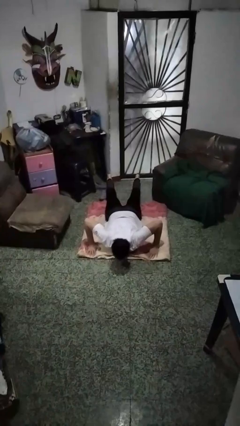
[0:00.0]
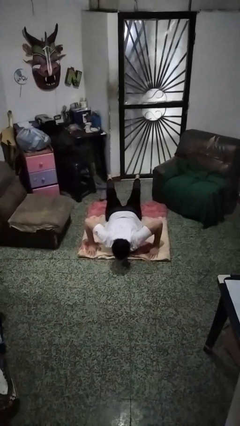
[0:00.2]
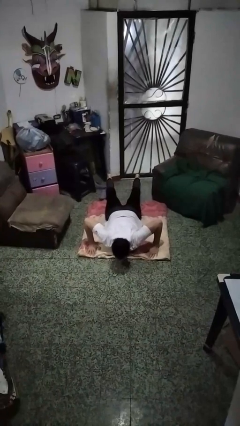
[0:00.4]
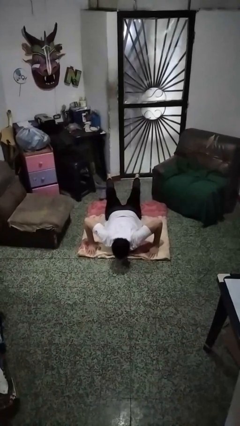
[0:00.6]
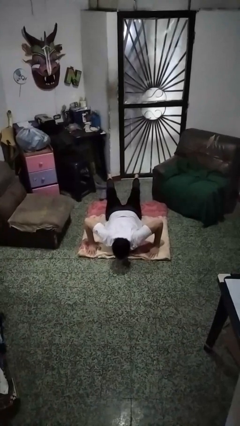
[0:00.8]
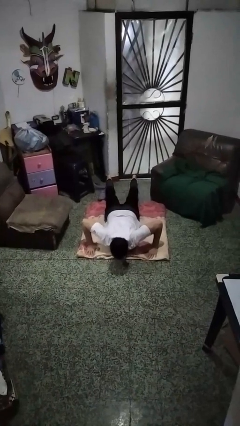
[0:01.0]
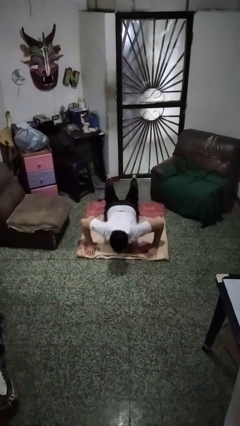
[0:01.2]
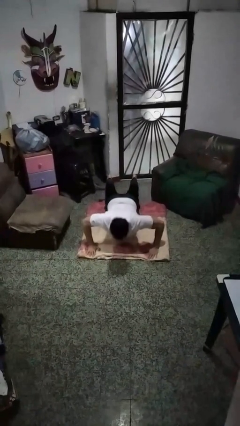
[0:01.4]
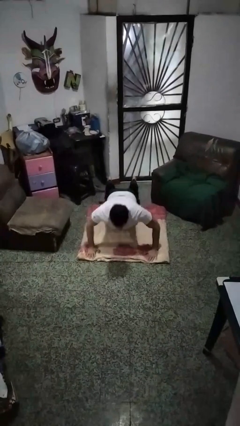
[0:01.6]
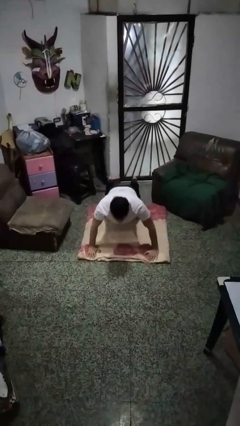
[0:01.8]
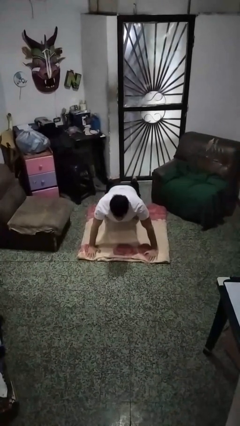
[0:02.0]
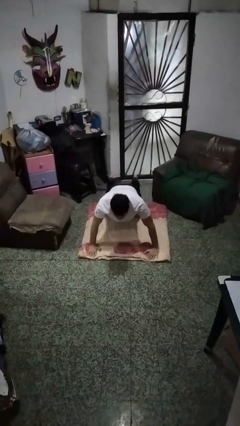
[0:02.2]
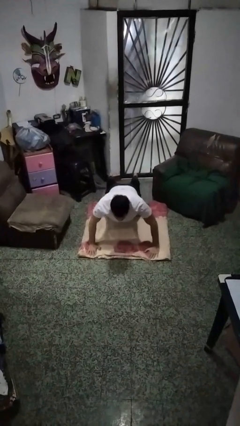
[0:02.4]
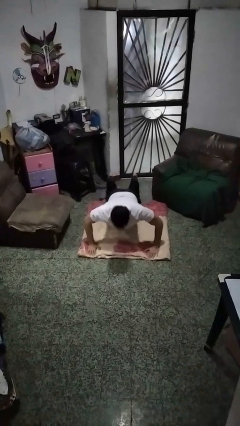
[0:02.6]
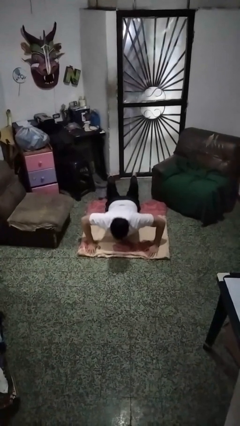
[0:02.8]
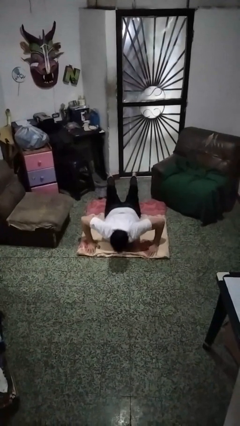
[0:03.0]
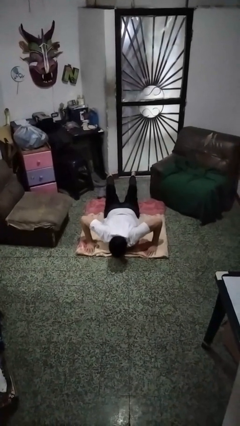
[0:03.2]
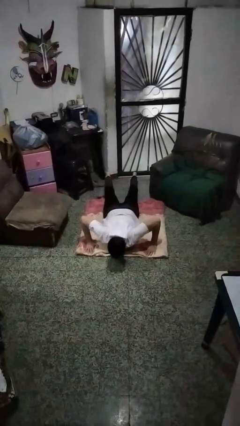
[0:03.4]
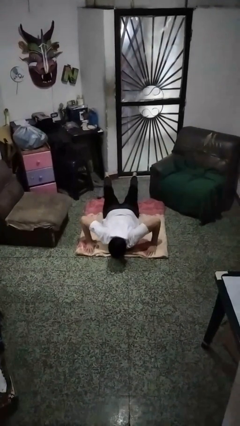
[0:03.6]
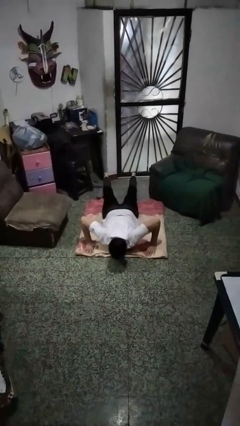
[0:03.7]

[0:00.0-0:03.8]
person exercises with pushup

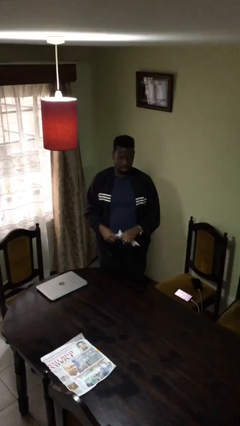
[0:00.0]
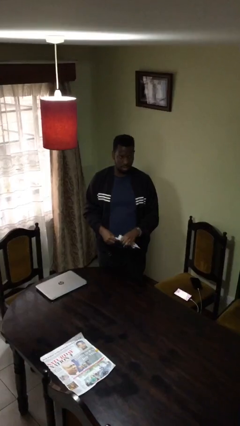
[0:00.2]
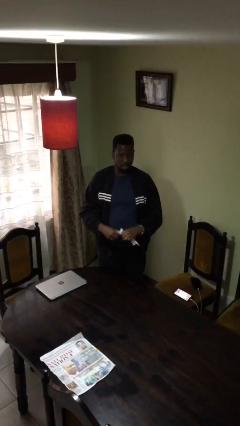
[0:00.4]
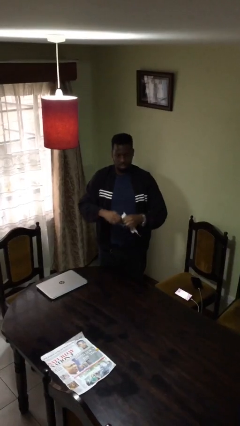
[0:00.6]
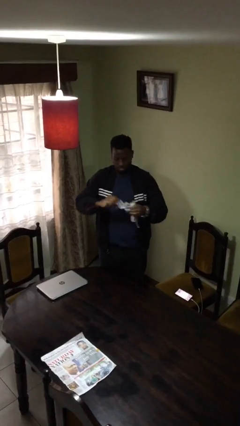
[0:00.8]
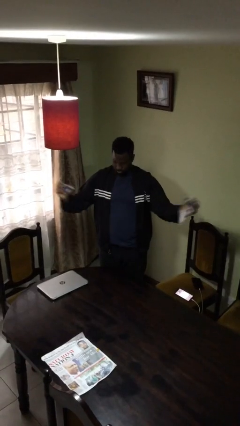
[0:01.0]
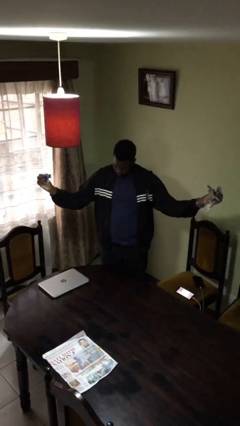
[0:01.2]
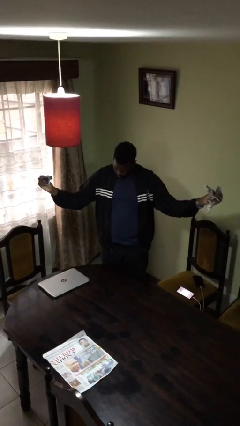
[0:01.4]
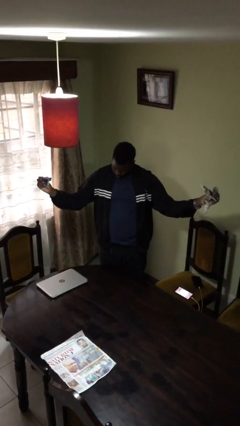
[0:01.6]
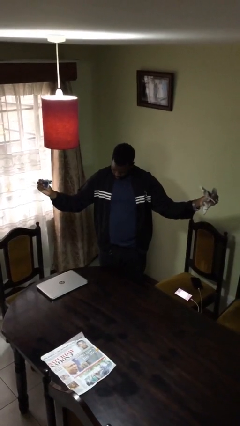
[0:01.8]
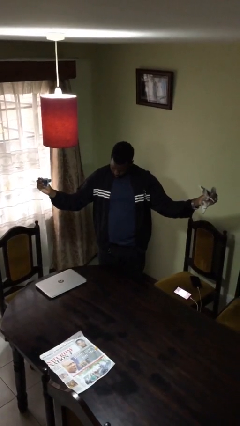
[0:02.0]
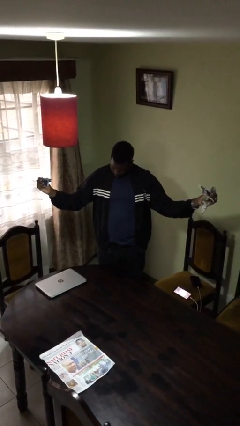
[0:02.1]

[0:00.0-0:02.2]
person tears paper

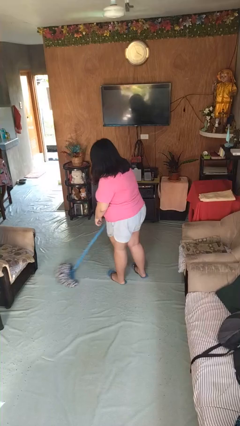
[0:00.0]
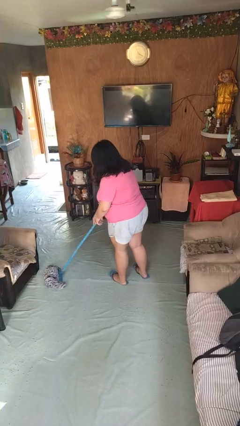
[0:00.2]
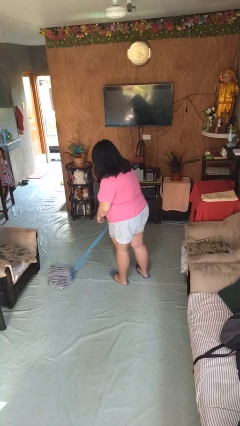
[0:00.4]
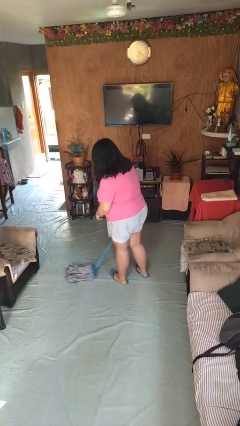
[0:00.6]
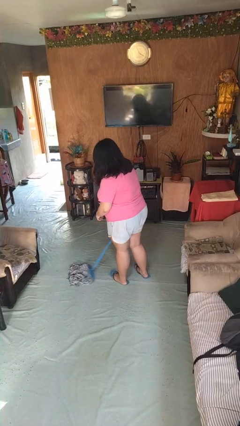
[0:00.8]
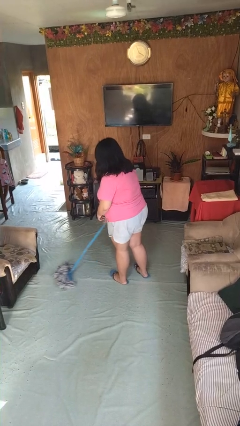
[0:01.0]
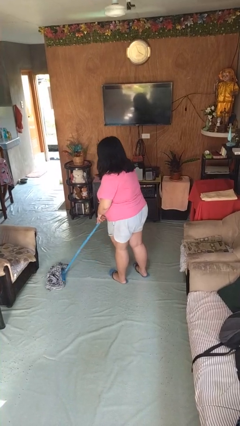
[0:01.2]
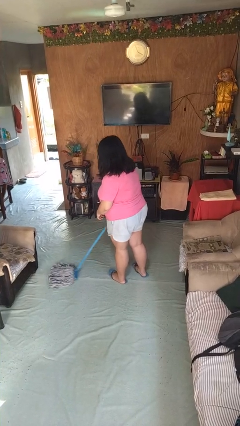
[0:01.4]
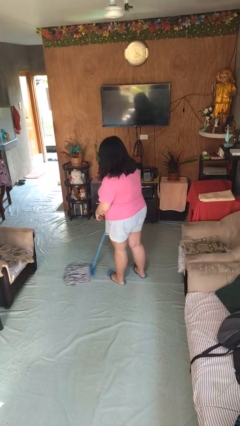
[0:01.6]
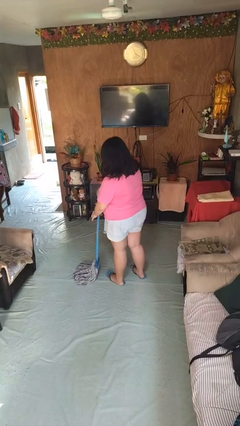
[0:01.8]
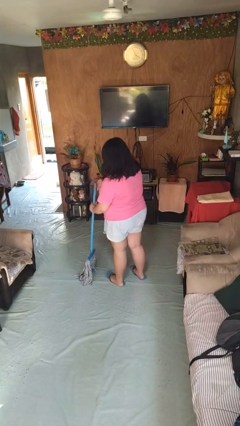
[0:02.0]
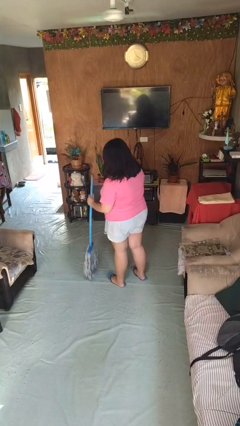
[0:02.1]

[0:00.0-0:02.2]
person mops

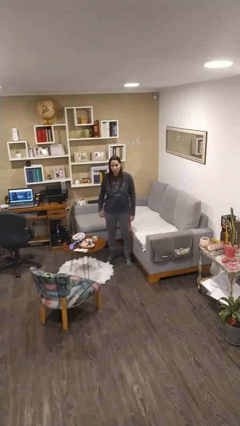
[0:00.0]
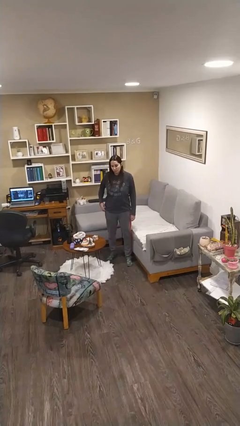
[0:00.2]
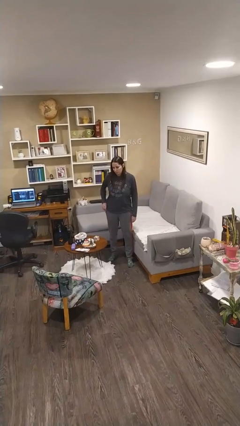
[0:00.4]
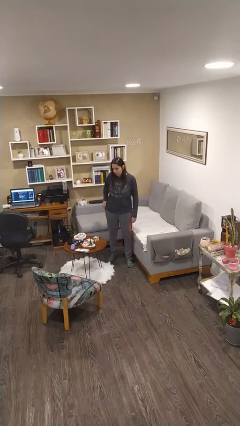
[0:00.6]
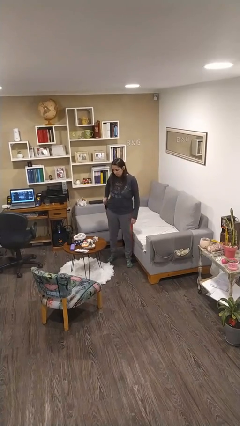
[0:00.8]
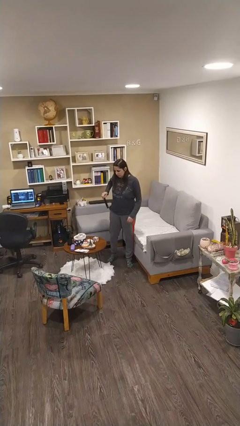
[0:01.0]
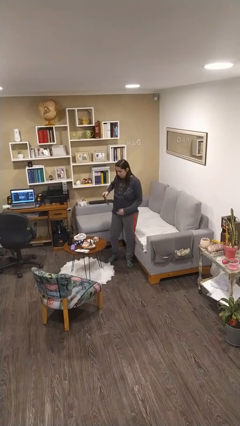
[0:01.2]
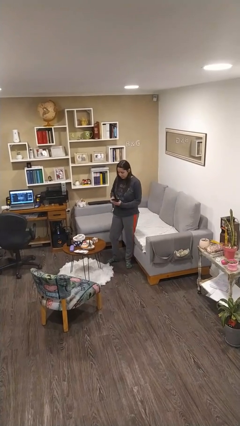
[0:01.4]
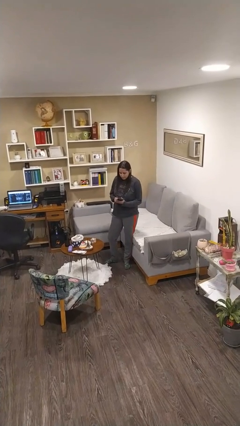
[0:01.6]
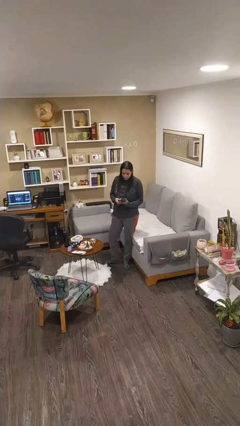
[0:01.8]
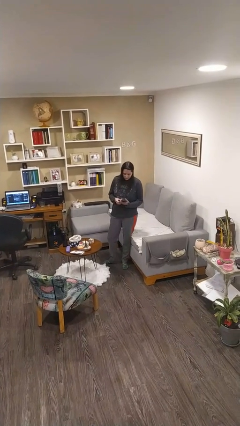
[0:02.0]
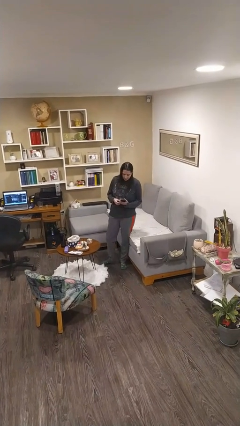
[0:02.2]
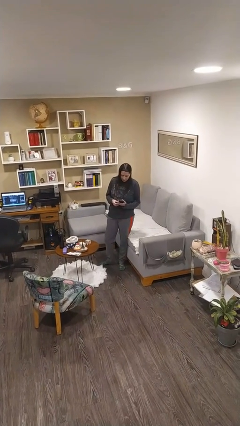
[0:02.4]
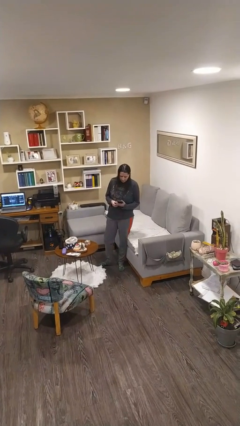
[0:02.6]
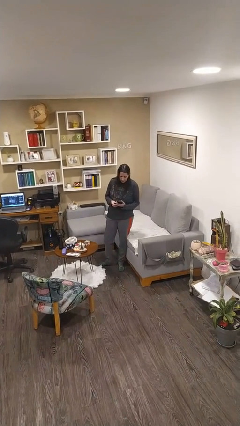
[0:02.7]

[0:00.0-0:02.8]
person takes phone from pocket

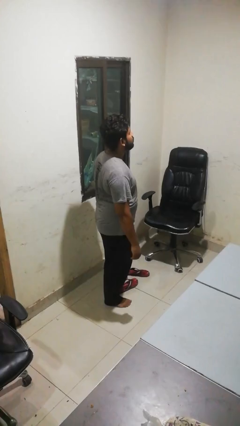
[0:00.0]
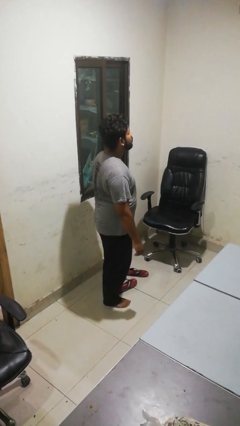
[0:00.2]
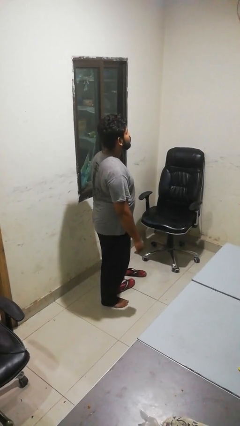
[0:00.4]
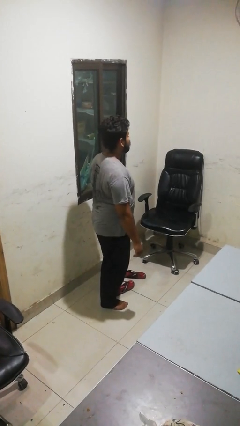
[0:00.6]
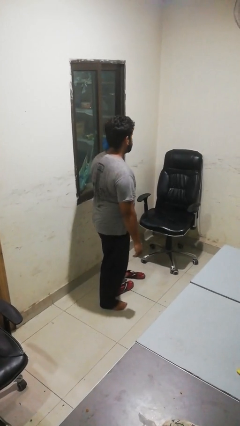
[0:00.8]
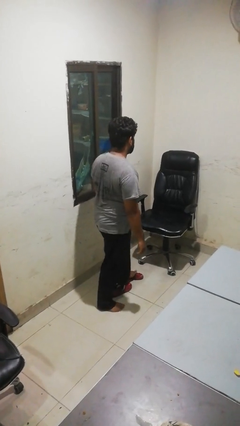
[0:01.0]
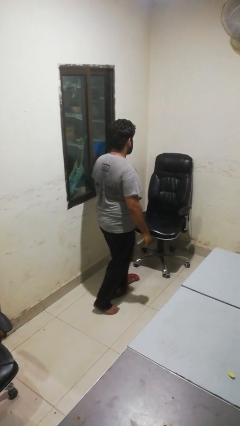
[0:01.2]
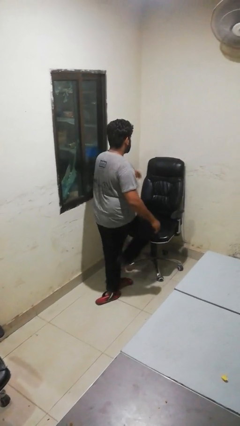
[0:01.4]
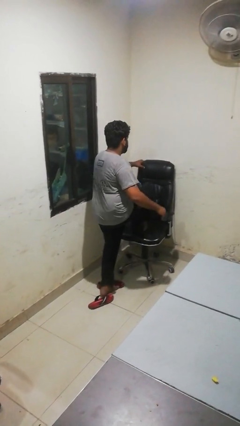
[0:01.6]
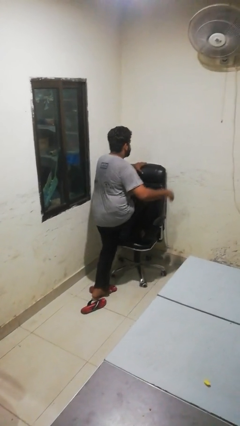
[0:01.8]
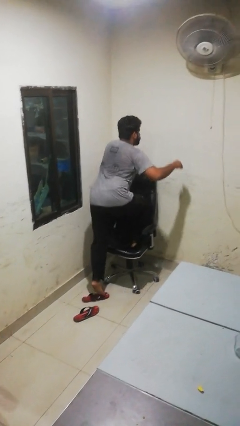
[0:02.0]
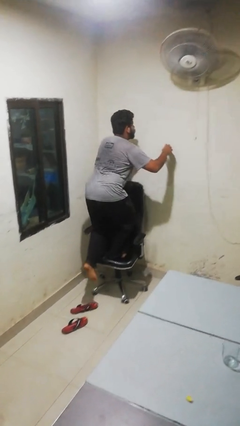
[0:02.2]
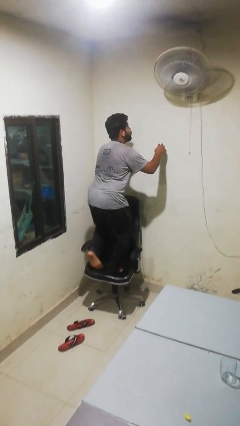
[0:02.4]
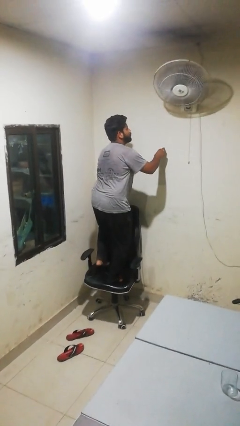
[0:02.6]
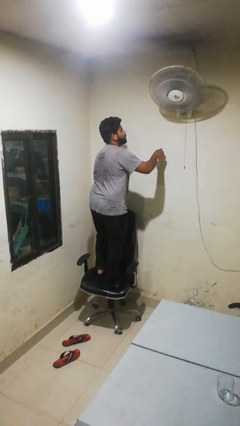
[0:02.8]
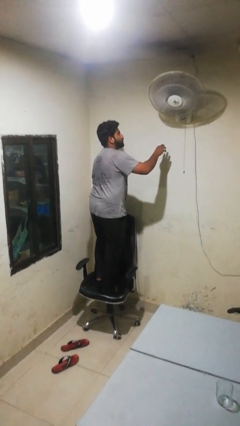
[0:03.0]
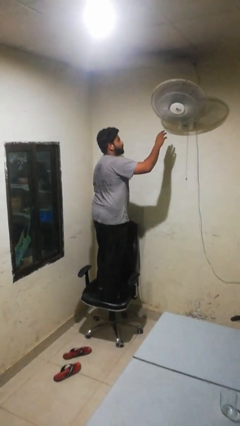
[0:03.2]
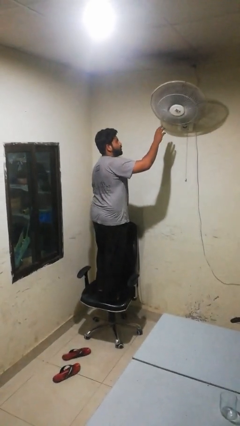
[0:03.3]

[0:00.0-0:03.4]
person climbs on chair

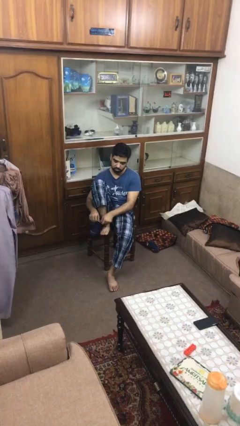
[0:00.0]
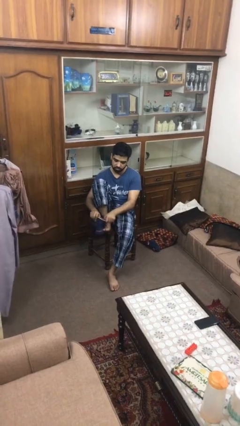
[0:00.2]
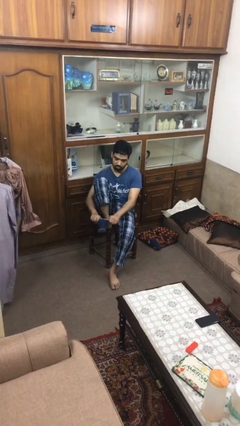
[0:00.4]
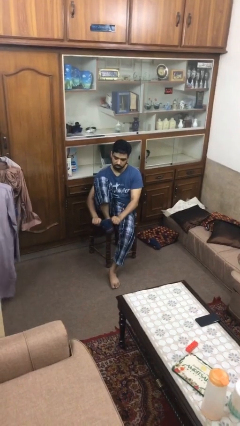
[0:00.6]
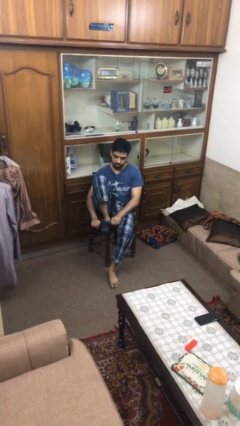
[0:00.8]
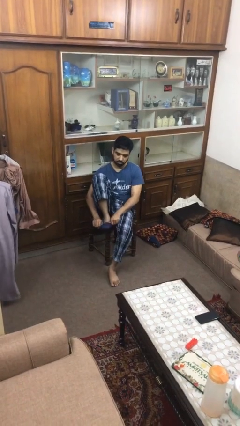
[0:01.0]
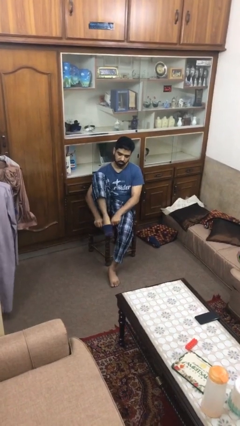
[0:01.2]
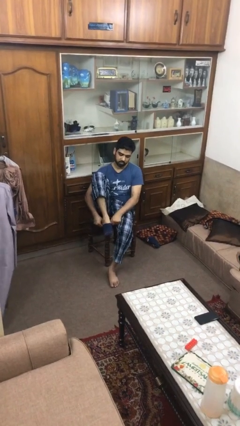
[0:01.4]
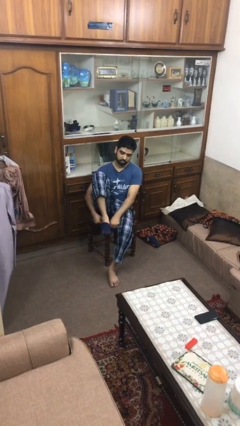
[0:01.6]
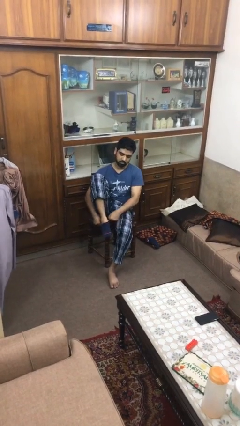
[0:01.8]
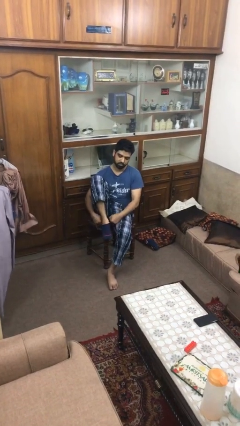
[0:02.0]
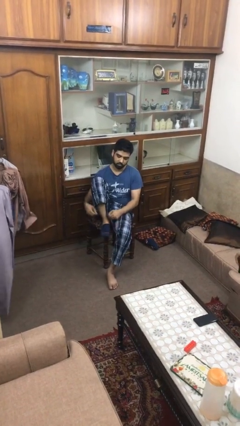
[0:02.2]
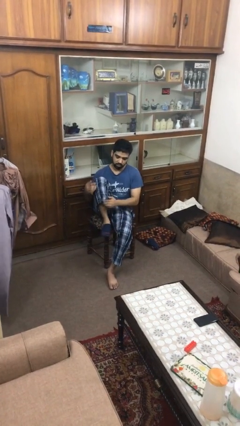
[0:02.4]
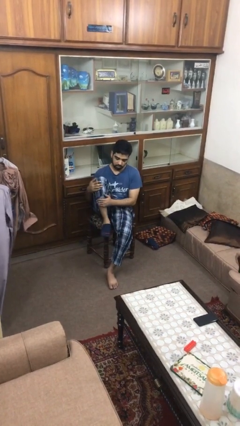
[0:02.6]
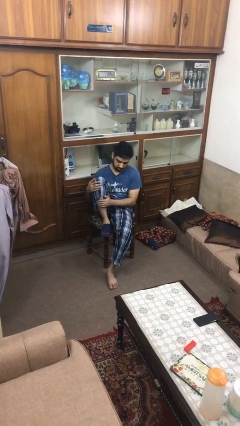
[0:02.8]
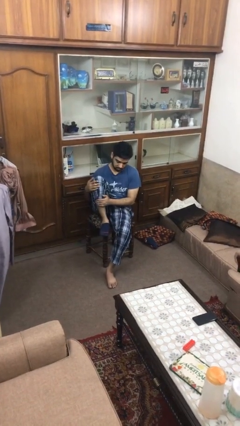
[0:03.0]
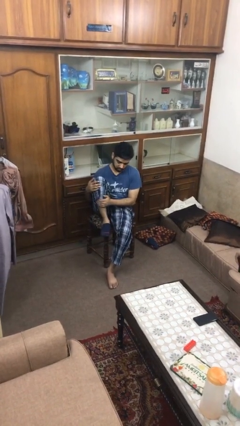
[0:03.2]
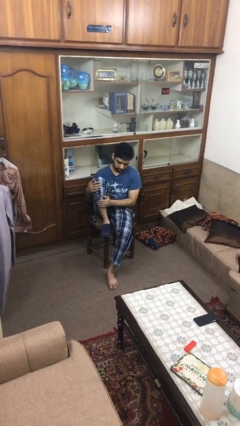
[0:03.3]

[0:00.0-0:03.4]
person puts on socks
